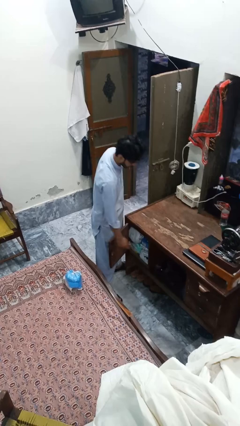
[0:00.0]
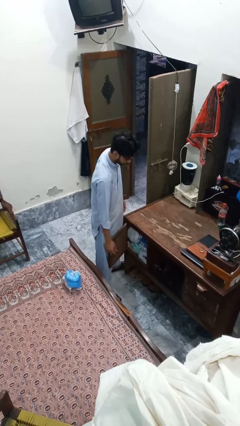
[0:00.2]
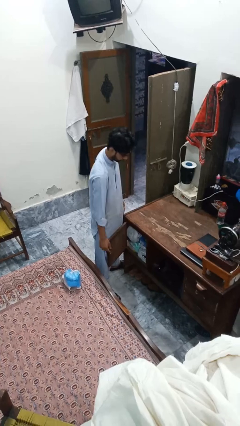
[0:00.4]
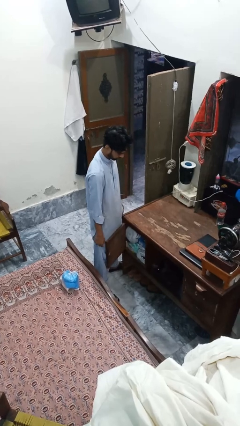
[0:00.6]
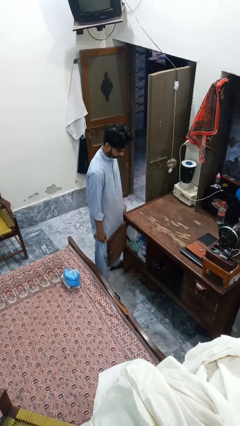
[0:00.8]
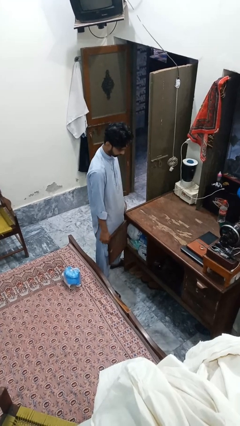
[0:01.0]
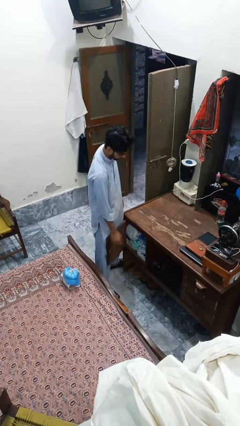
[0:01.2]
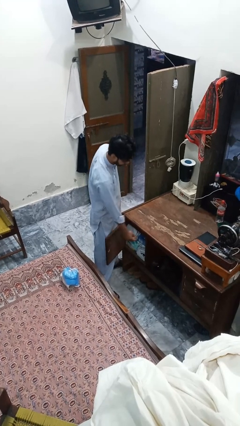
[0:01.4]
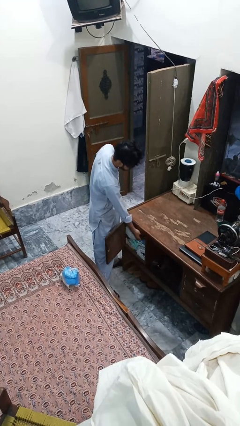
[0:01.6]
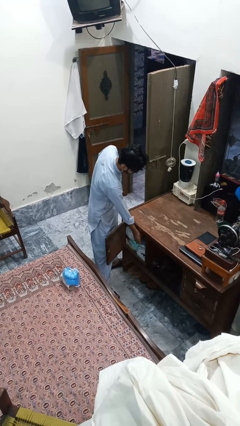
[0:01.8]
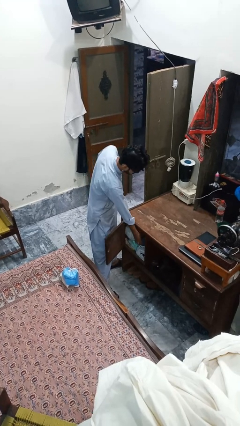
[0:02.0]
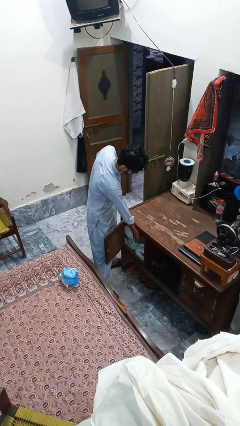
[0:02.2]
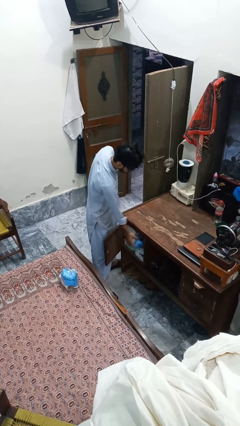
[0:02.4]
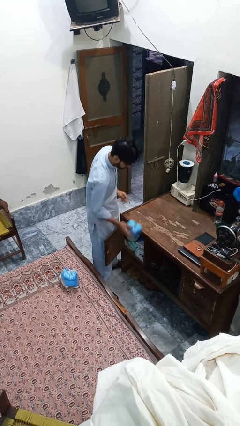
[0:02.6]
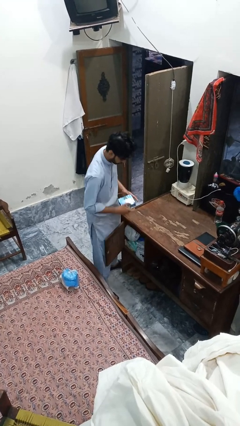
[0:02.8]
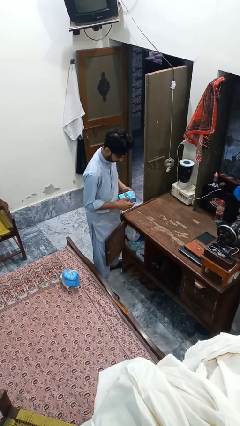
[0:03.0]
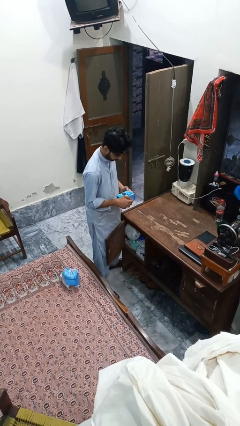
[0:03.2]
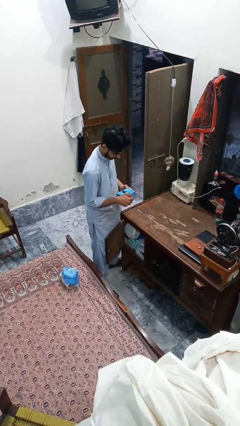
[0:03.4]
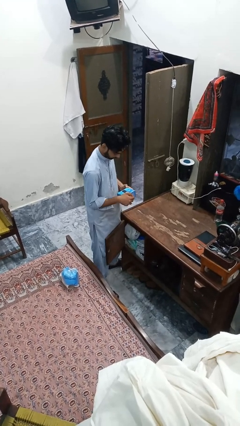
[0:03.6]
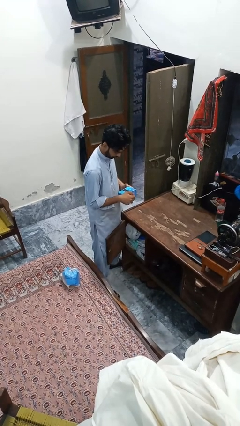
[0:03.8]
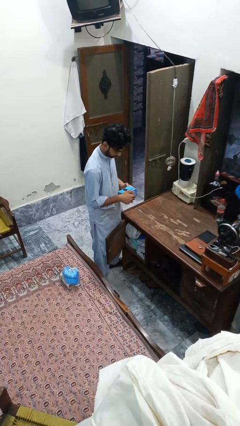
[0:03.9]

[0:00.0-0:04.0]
person picks up object from cabinet

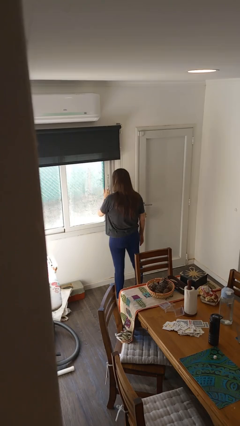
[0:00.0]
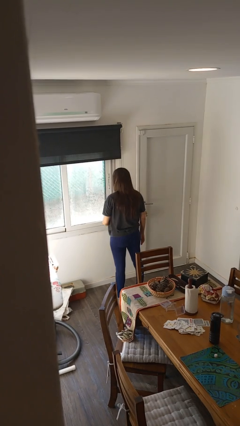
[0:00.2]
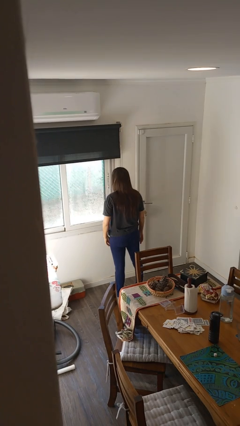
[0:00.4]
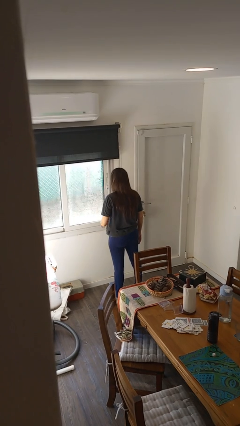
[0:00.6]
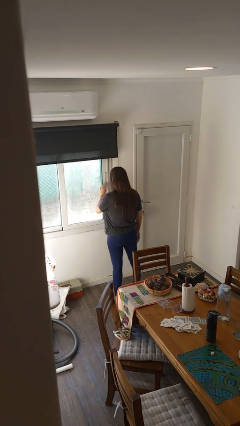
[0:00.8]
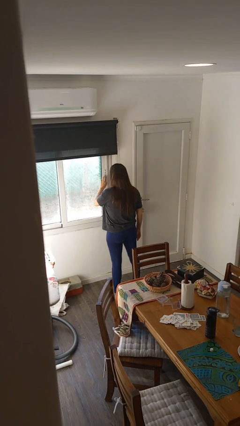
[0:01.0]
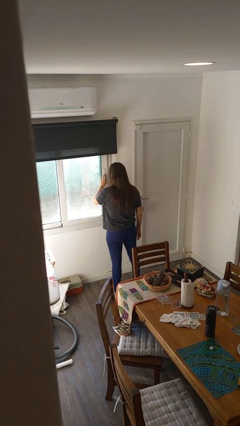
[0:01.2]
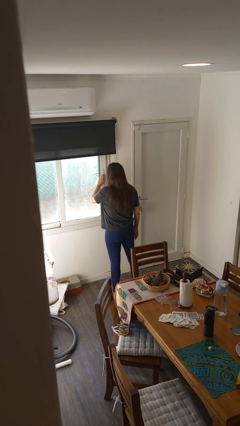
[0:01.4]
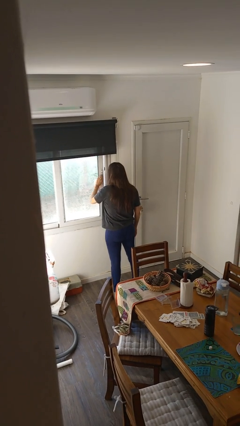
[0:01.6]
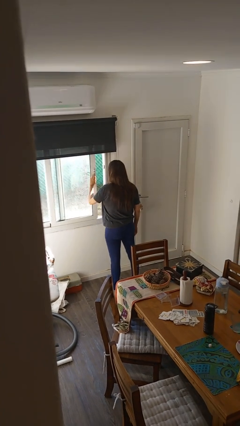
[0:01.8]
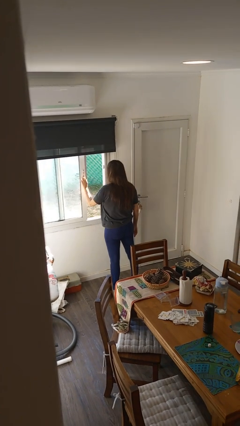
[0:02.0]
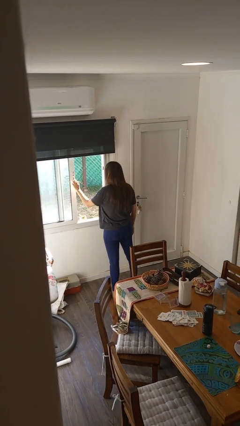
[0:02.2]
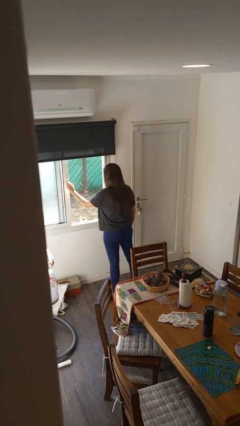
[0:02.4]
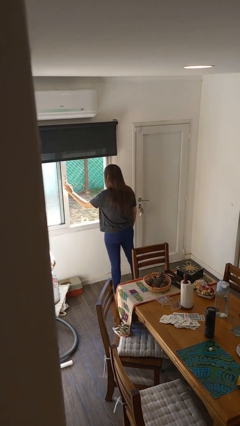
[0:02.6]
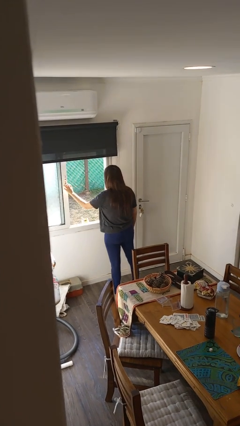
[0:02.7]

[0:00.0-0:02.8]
person opens home window

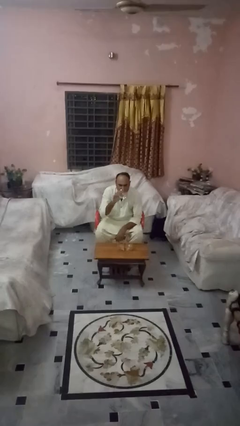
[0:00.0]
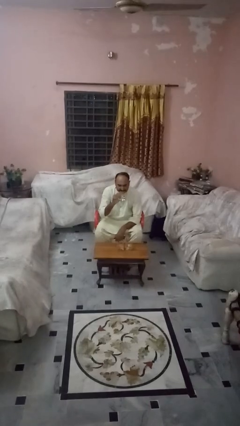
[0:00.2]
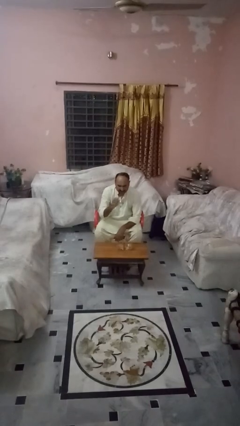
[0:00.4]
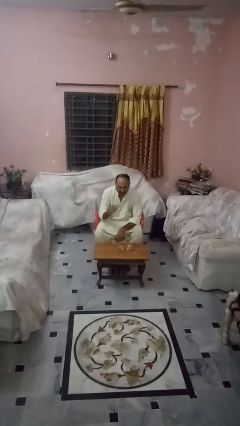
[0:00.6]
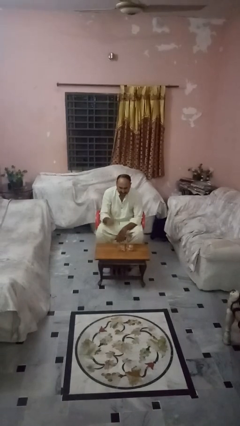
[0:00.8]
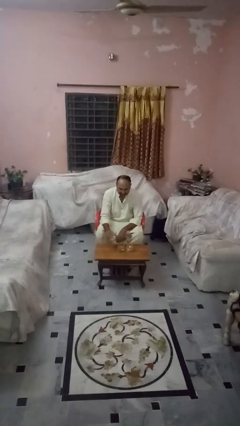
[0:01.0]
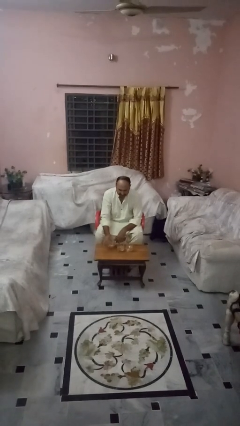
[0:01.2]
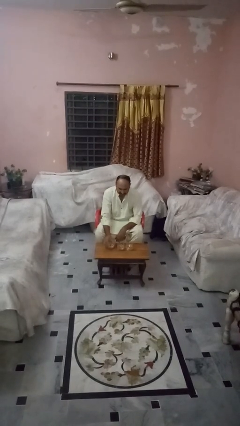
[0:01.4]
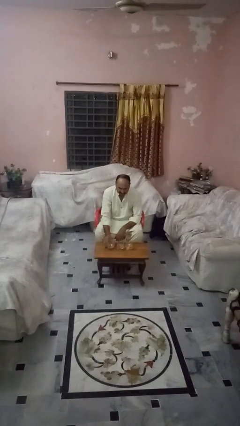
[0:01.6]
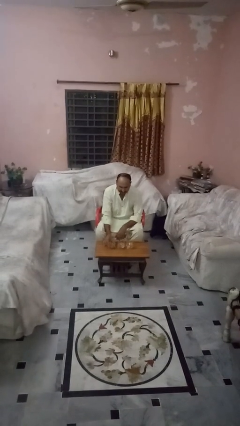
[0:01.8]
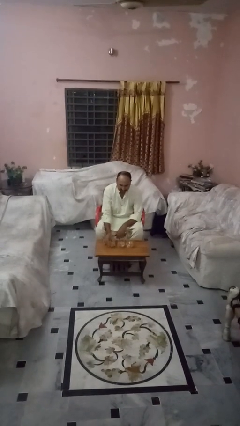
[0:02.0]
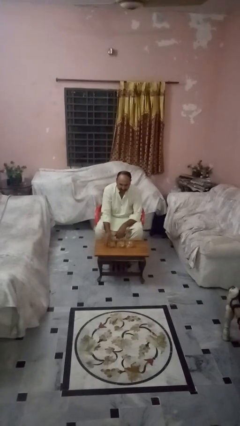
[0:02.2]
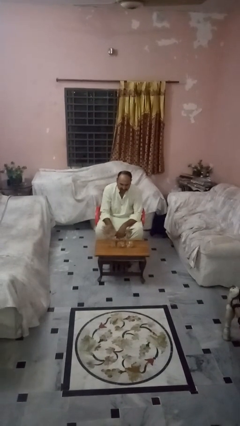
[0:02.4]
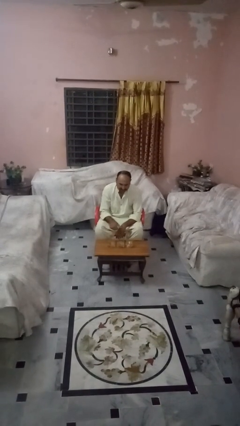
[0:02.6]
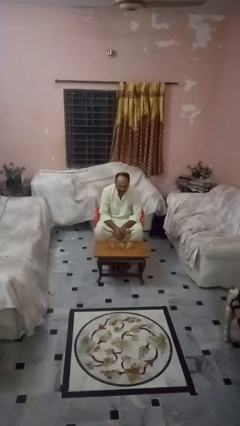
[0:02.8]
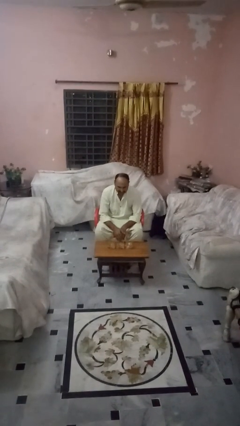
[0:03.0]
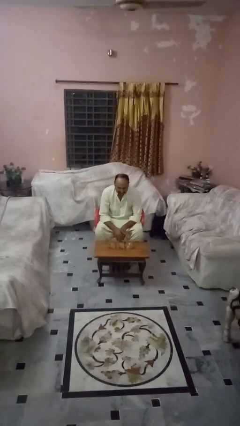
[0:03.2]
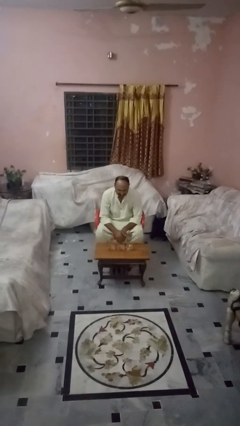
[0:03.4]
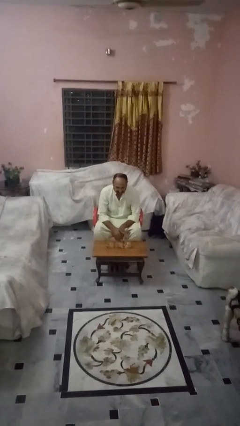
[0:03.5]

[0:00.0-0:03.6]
person puts down object on table

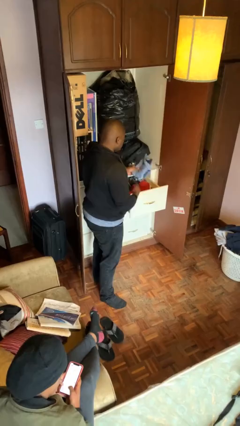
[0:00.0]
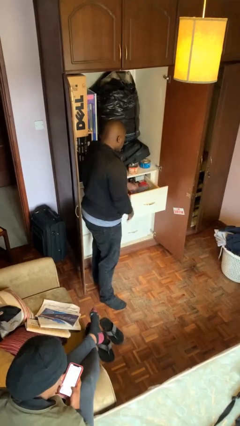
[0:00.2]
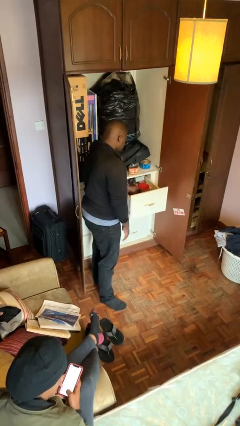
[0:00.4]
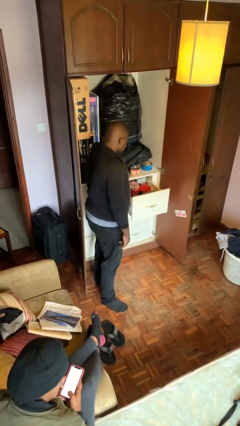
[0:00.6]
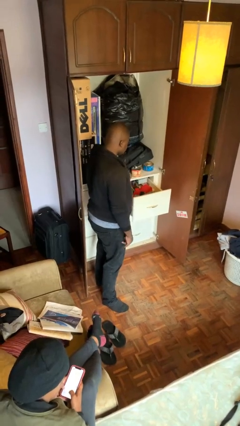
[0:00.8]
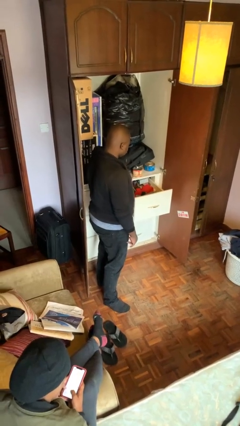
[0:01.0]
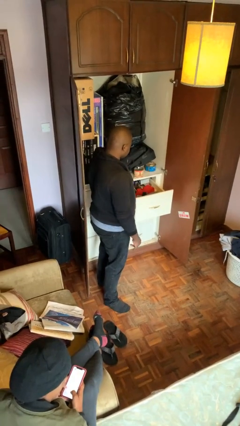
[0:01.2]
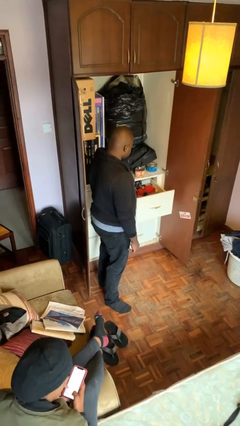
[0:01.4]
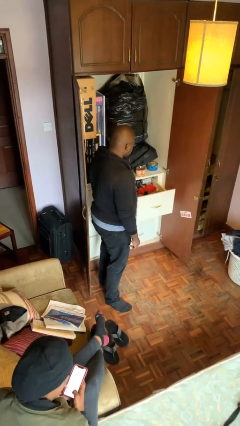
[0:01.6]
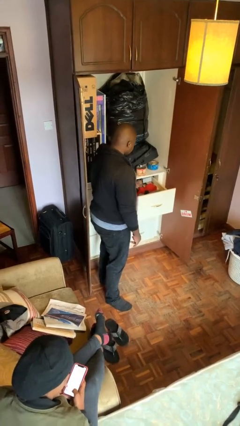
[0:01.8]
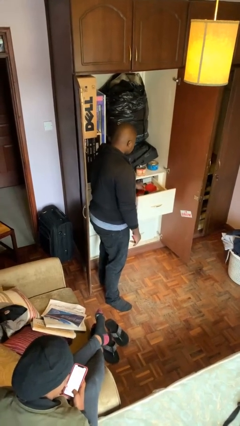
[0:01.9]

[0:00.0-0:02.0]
person puts clothes into dresser

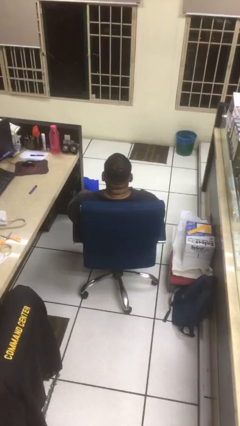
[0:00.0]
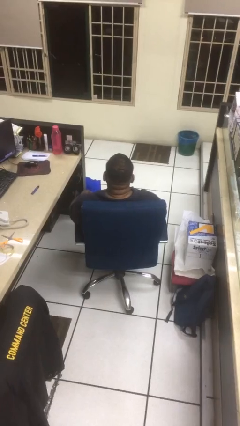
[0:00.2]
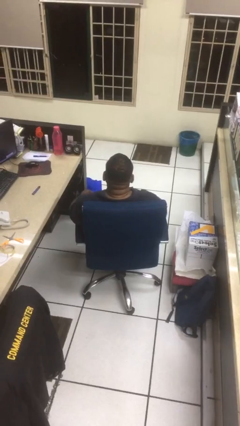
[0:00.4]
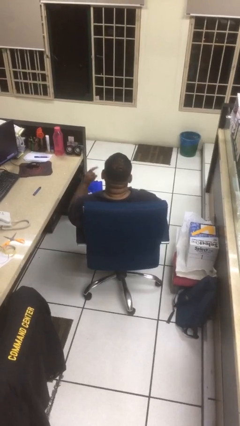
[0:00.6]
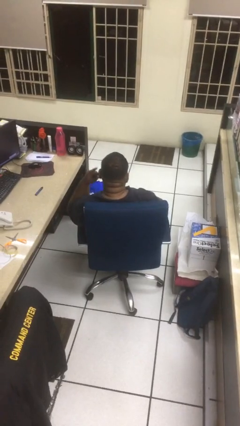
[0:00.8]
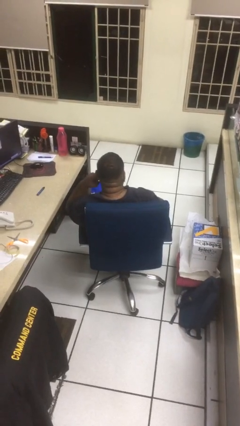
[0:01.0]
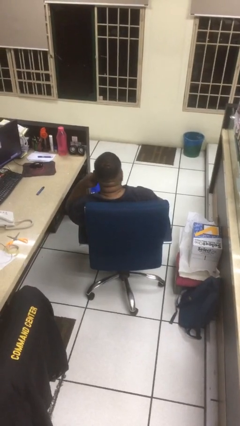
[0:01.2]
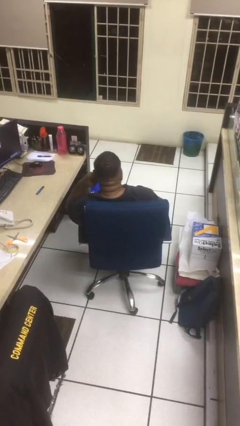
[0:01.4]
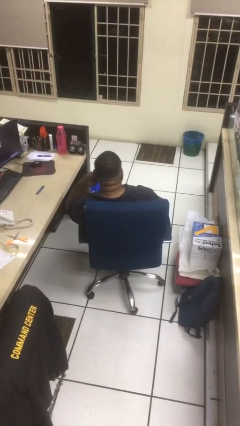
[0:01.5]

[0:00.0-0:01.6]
person gestures listen closely

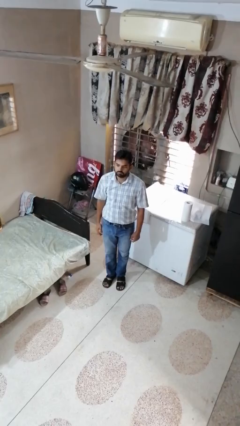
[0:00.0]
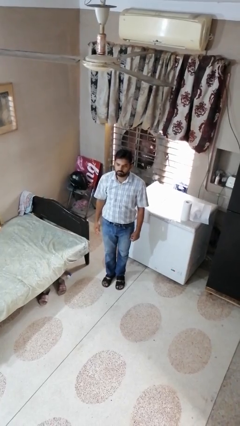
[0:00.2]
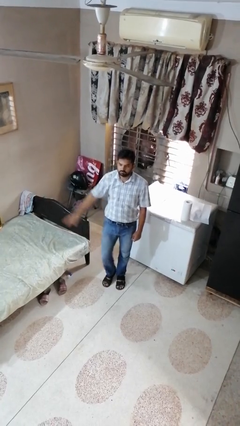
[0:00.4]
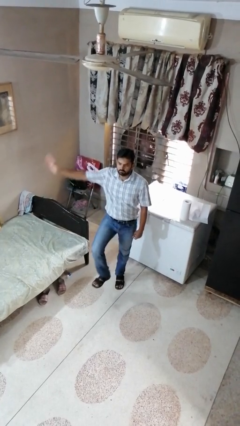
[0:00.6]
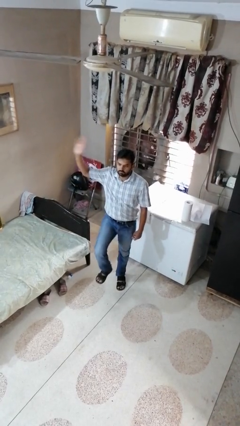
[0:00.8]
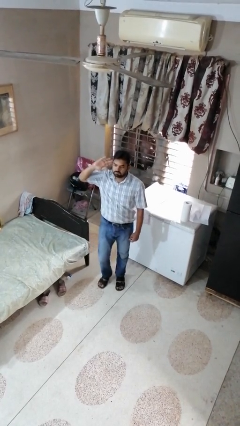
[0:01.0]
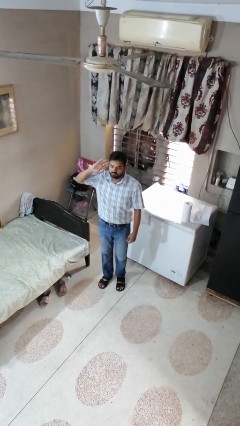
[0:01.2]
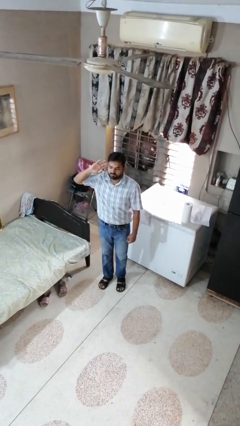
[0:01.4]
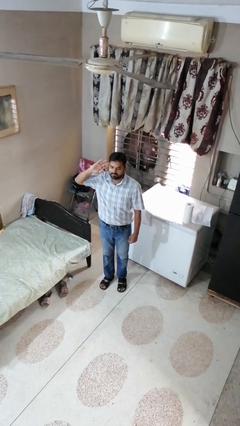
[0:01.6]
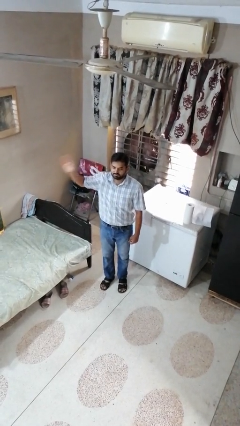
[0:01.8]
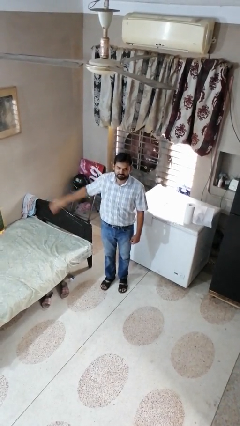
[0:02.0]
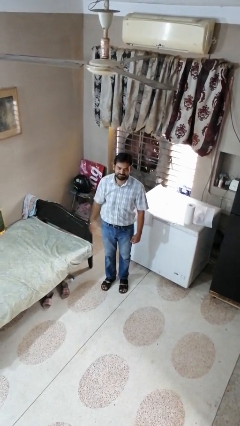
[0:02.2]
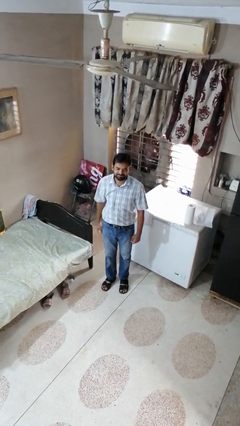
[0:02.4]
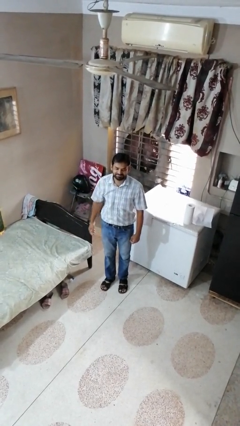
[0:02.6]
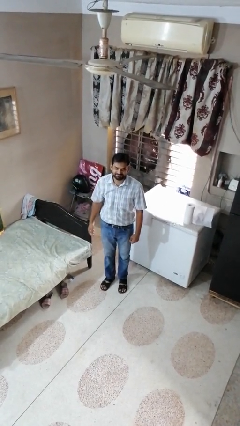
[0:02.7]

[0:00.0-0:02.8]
person salutes

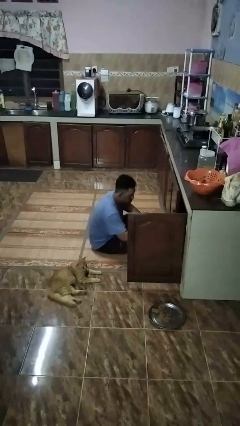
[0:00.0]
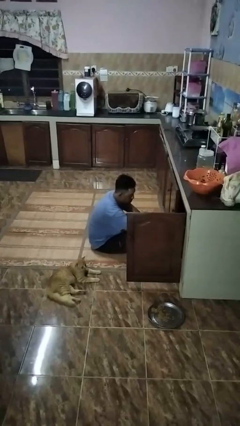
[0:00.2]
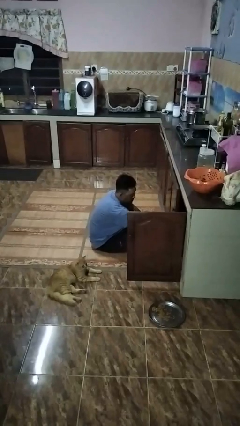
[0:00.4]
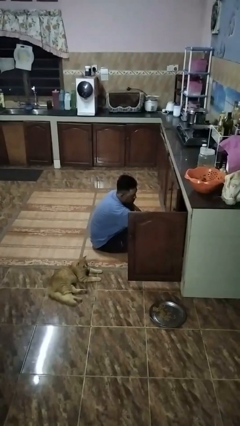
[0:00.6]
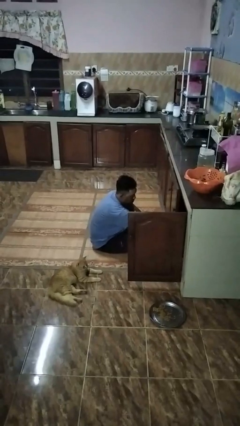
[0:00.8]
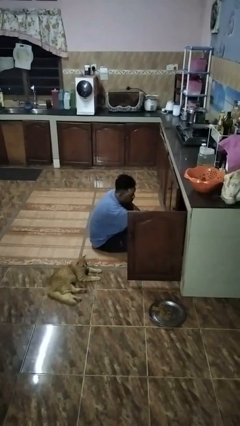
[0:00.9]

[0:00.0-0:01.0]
person puts object into kitchen drawer
